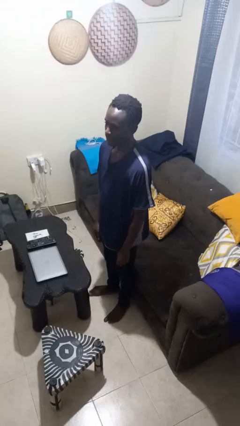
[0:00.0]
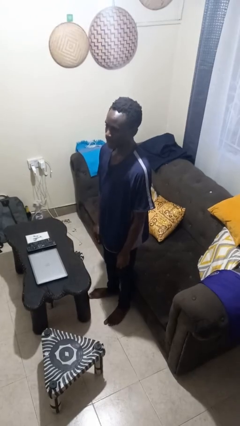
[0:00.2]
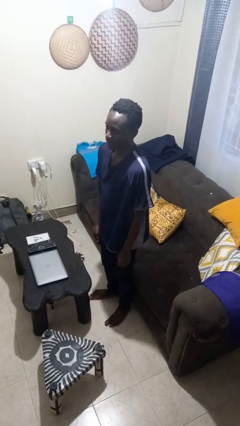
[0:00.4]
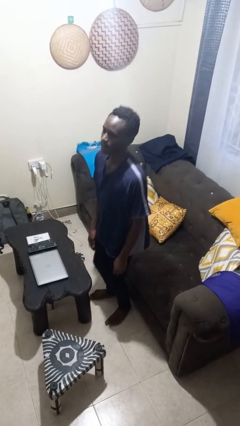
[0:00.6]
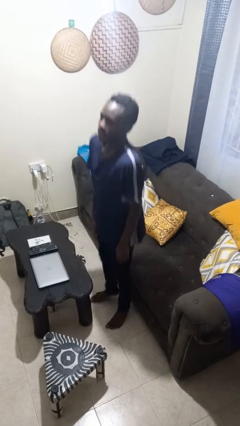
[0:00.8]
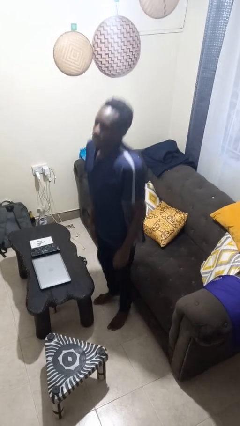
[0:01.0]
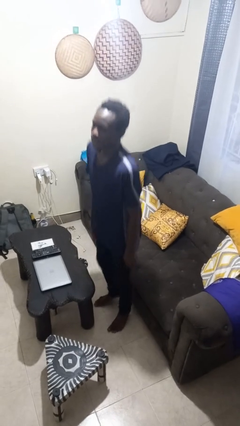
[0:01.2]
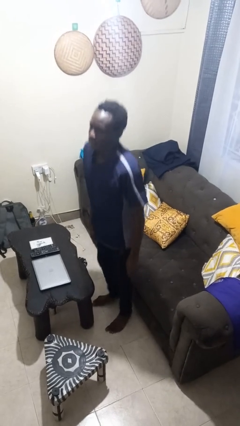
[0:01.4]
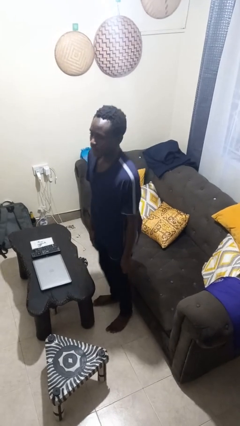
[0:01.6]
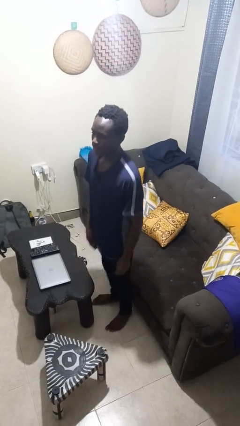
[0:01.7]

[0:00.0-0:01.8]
person jumps

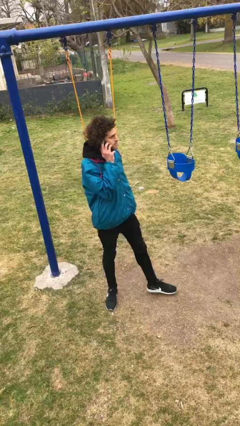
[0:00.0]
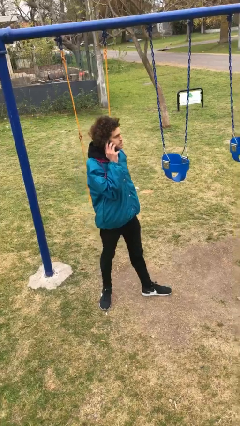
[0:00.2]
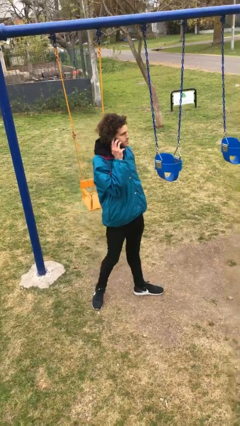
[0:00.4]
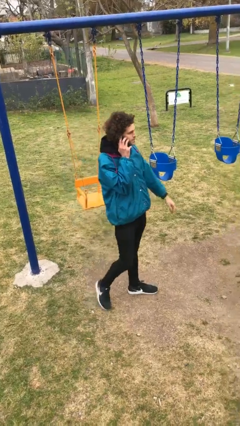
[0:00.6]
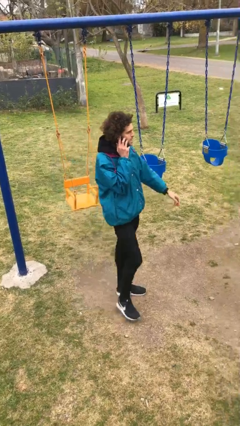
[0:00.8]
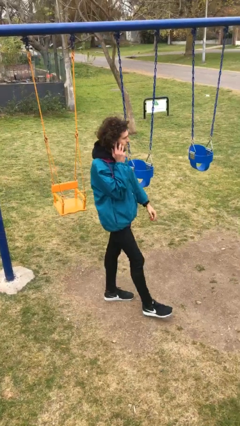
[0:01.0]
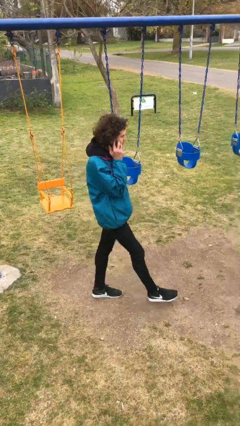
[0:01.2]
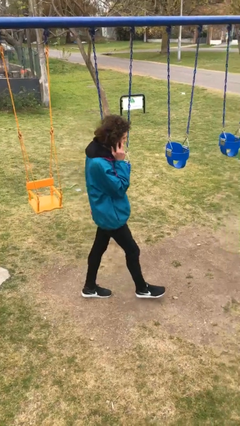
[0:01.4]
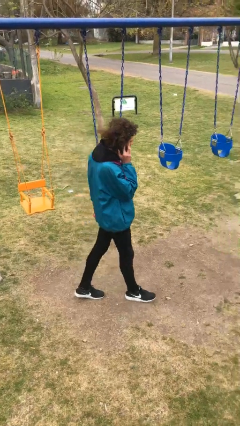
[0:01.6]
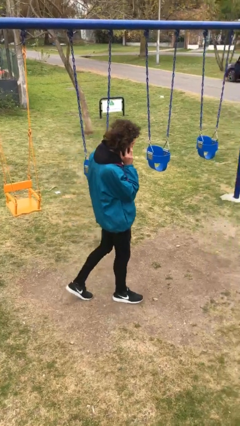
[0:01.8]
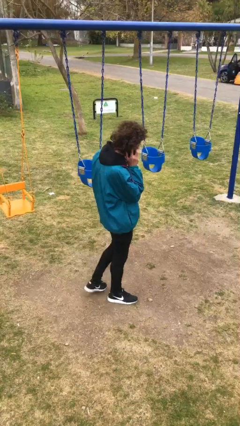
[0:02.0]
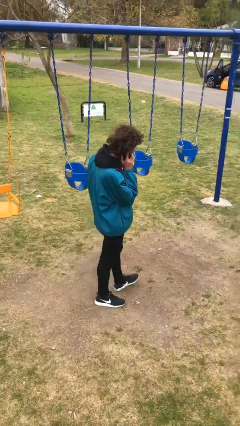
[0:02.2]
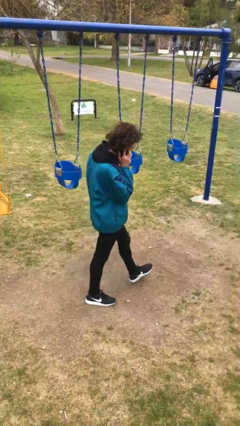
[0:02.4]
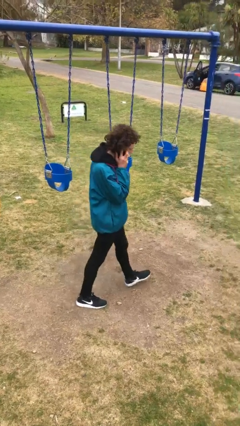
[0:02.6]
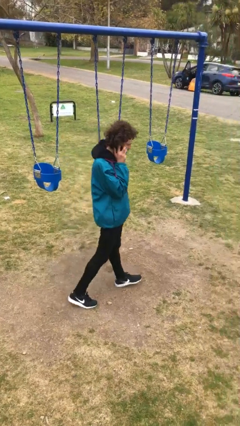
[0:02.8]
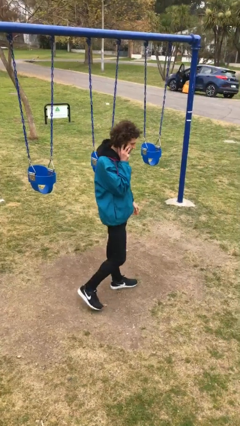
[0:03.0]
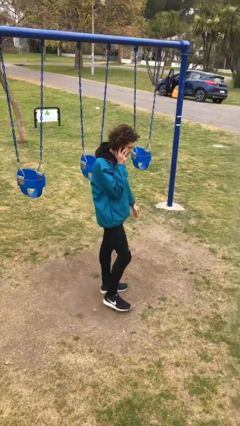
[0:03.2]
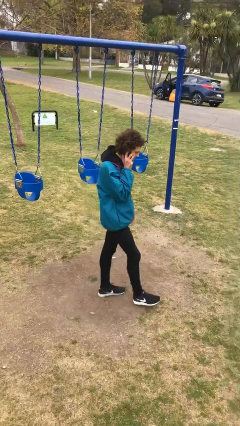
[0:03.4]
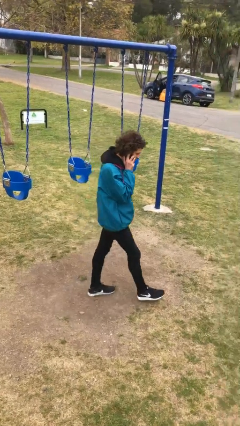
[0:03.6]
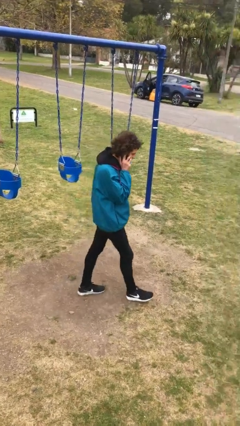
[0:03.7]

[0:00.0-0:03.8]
person talks on phone

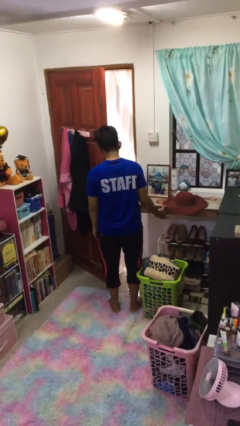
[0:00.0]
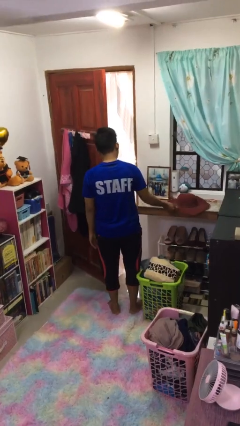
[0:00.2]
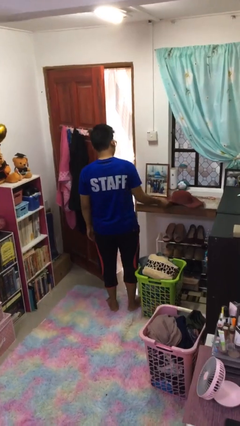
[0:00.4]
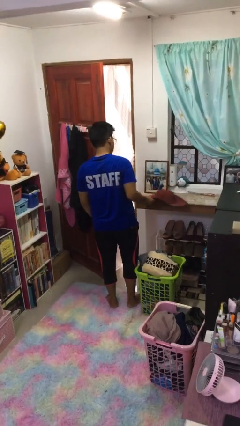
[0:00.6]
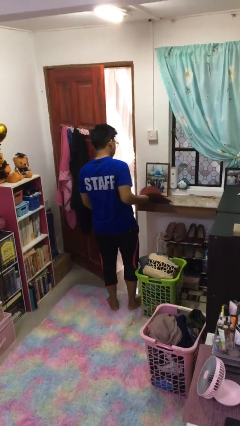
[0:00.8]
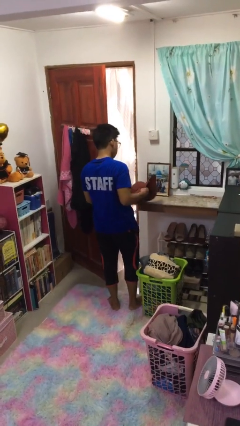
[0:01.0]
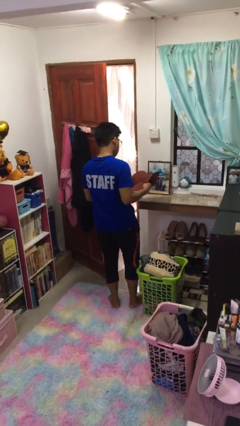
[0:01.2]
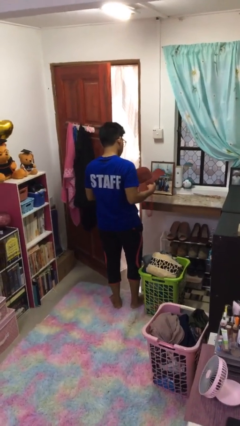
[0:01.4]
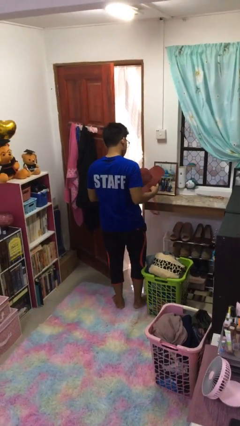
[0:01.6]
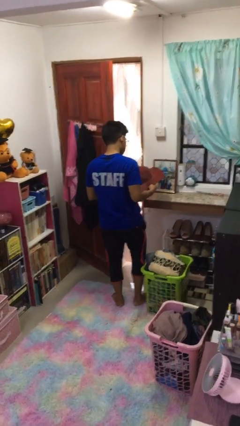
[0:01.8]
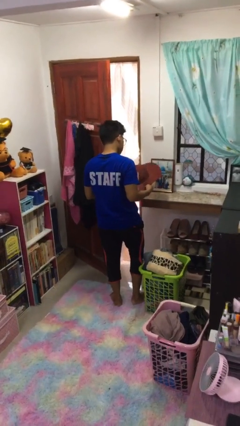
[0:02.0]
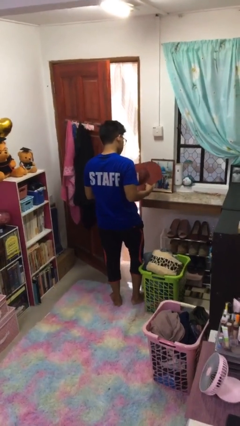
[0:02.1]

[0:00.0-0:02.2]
person picks up object from countertop

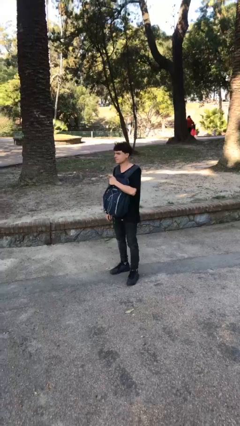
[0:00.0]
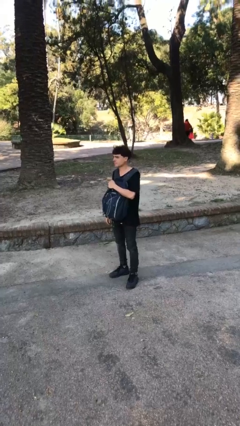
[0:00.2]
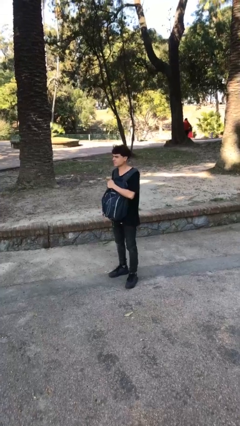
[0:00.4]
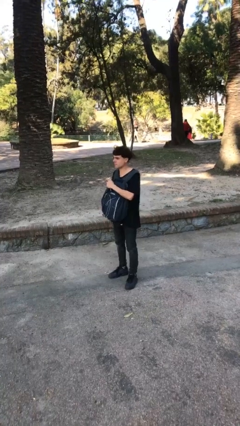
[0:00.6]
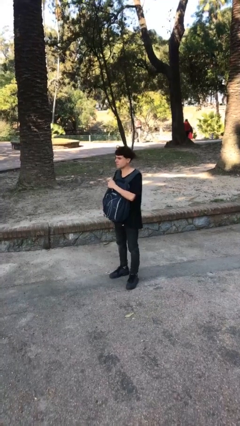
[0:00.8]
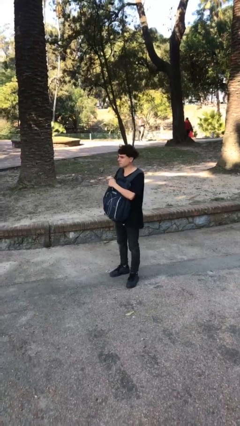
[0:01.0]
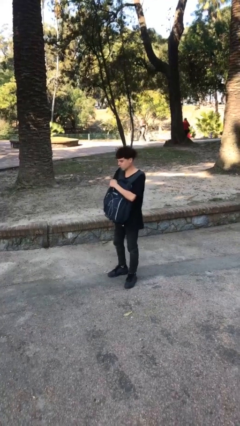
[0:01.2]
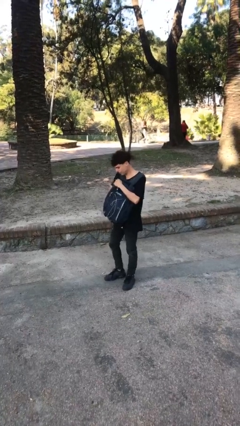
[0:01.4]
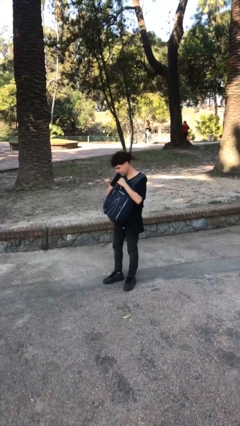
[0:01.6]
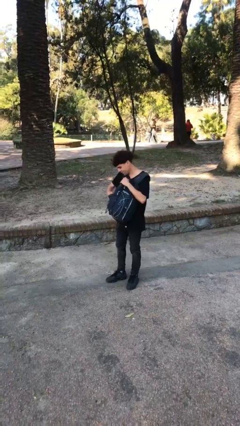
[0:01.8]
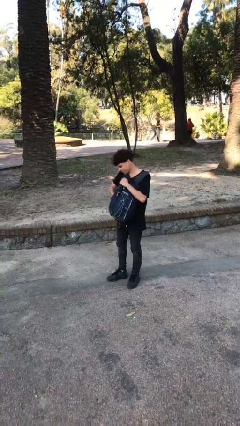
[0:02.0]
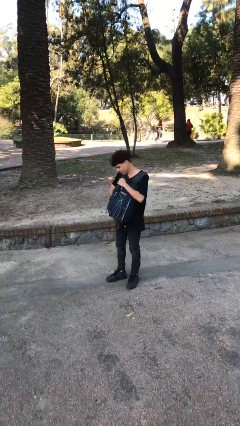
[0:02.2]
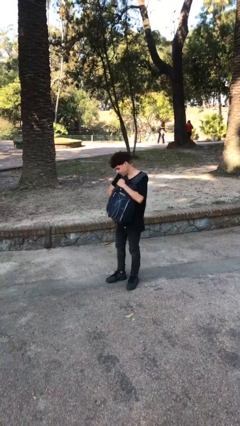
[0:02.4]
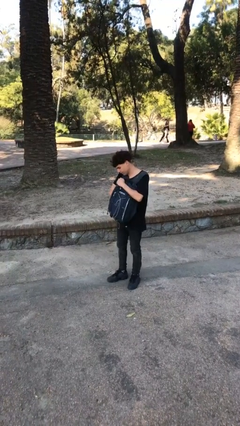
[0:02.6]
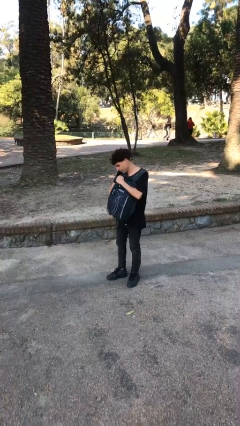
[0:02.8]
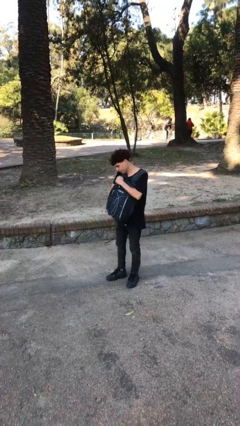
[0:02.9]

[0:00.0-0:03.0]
person searches in backpack

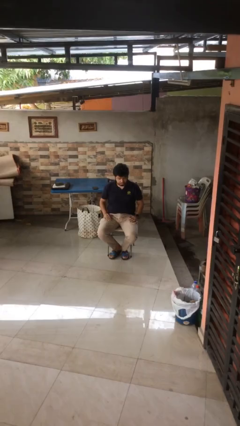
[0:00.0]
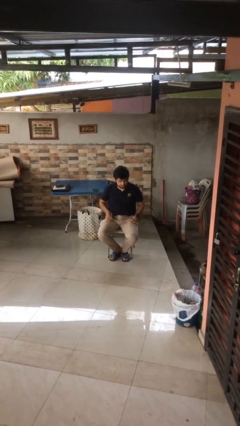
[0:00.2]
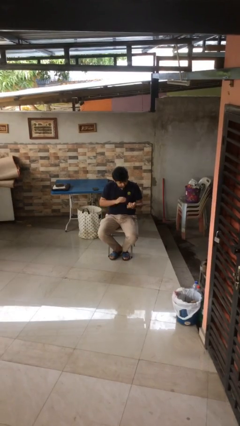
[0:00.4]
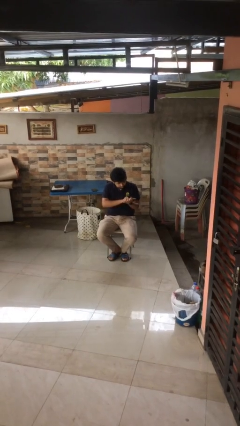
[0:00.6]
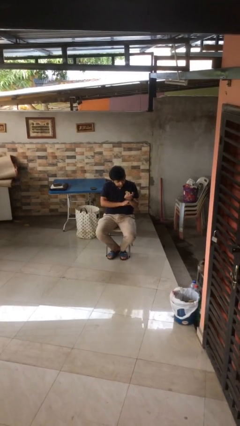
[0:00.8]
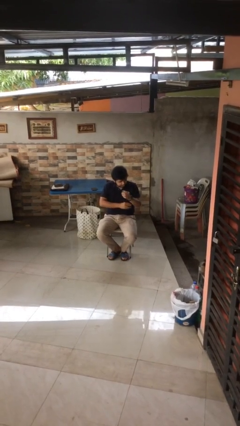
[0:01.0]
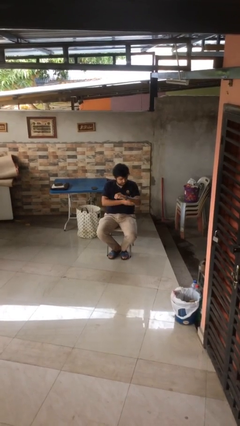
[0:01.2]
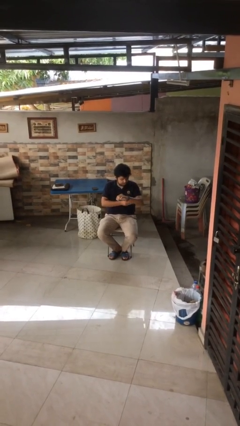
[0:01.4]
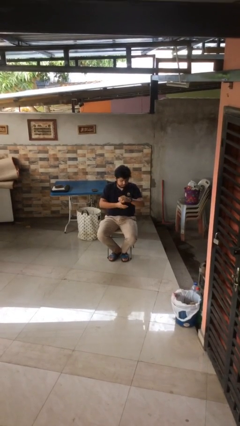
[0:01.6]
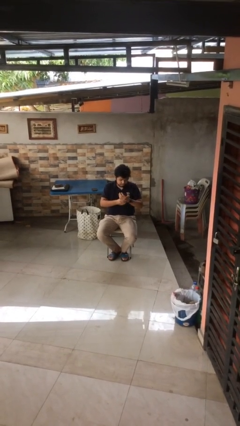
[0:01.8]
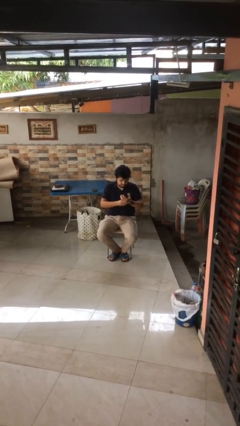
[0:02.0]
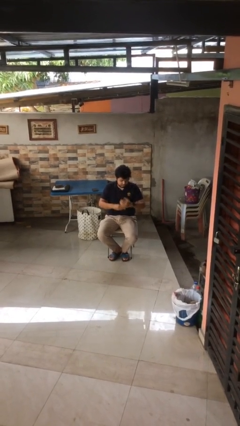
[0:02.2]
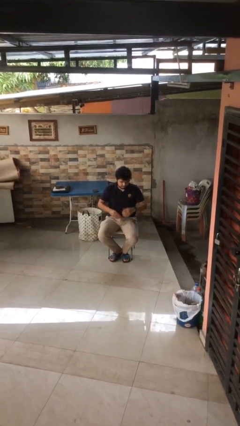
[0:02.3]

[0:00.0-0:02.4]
person looks at hands in lap

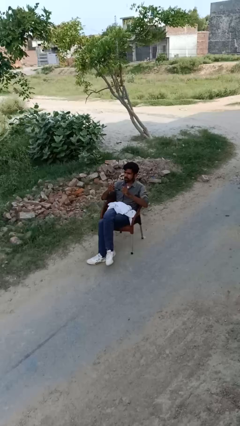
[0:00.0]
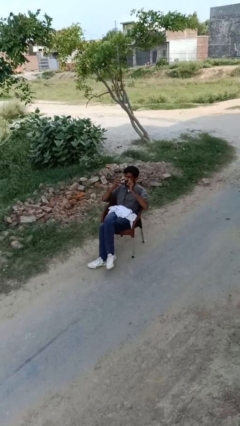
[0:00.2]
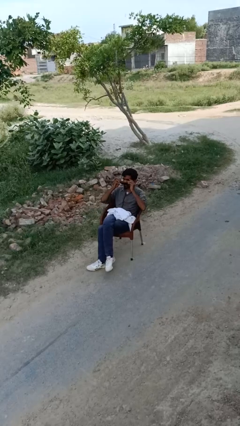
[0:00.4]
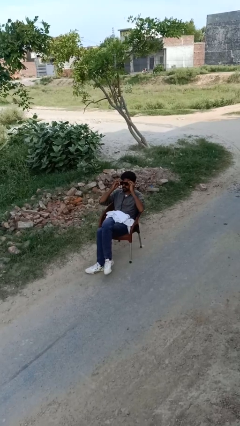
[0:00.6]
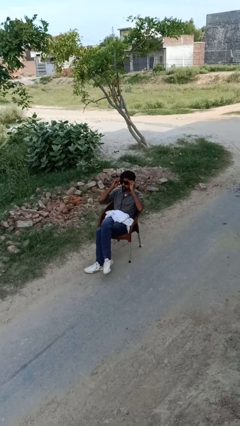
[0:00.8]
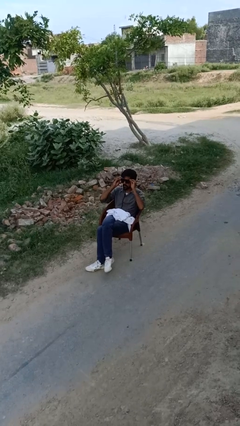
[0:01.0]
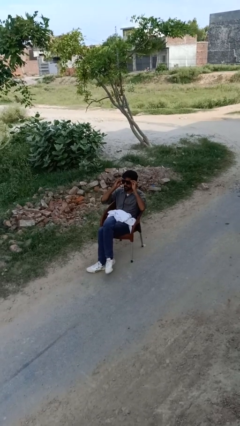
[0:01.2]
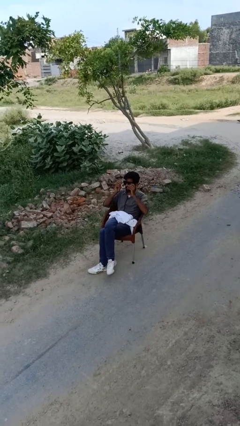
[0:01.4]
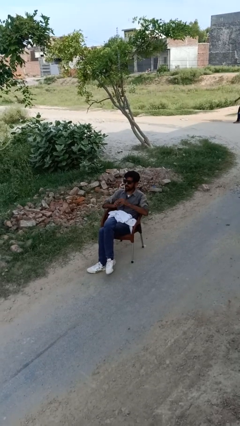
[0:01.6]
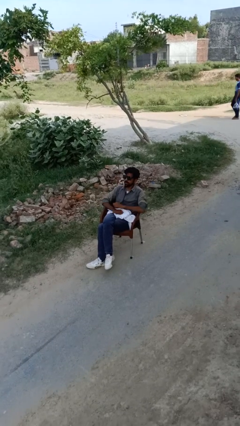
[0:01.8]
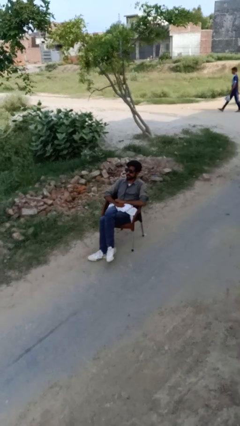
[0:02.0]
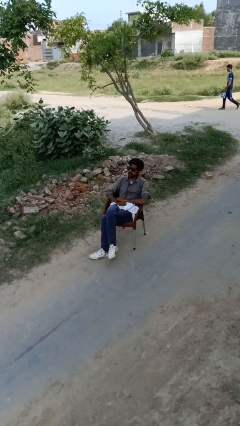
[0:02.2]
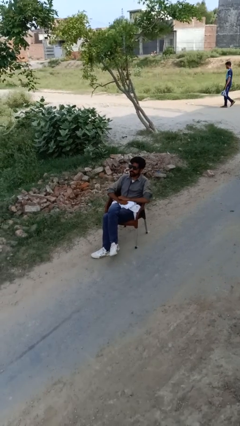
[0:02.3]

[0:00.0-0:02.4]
person puts on glasses

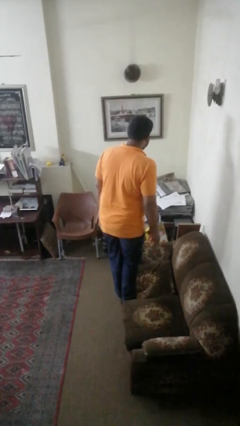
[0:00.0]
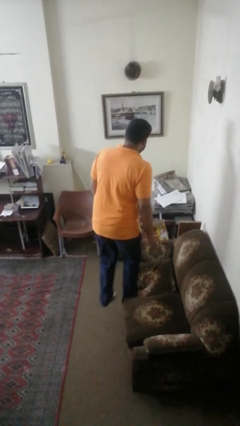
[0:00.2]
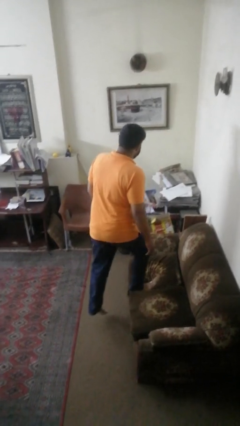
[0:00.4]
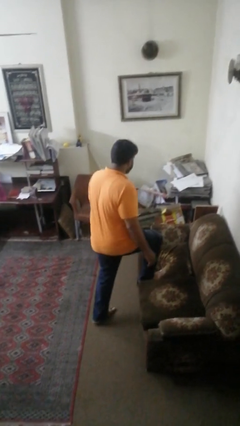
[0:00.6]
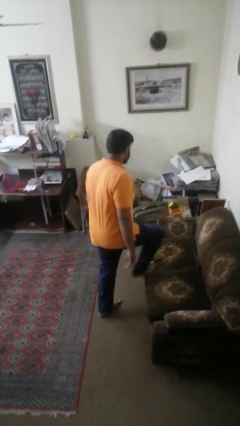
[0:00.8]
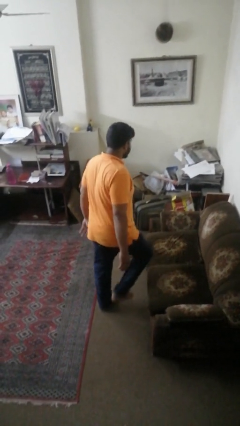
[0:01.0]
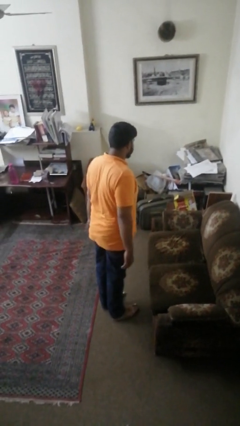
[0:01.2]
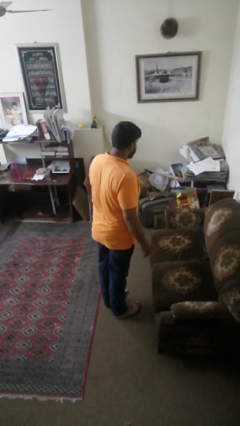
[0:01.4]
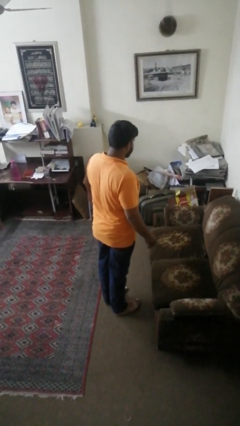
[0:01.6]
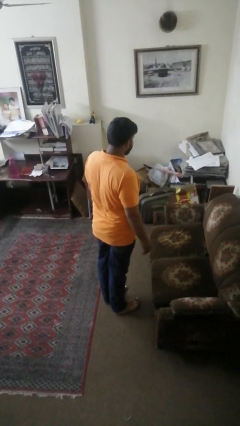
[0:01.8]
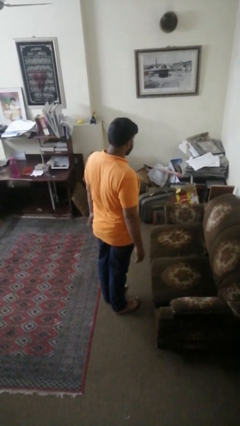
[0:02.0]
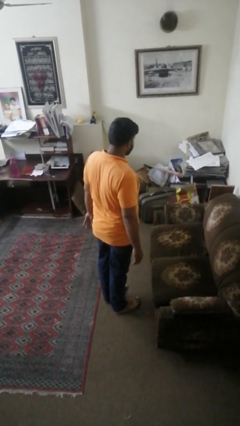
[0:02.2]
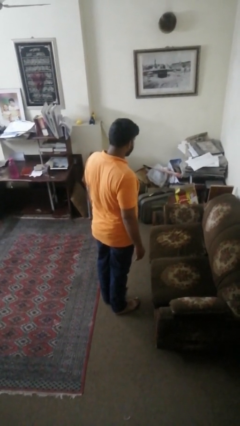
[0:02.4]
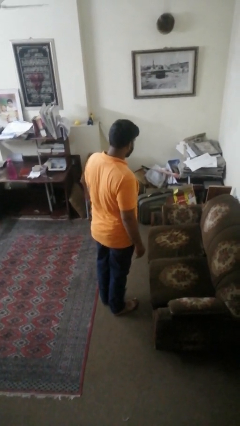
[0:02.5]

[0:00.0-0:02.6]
person climbs off couch
